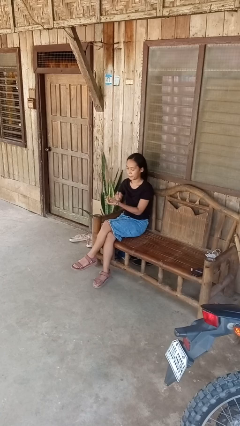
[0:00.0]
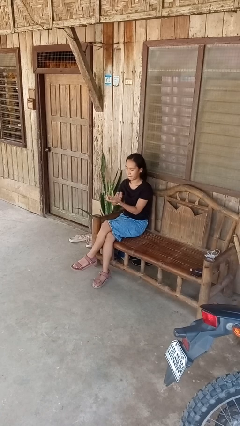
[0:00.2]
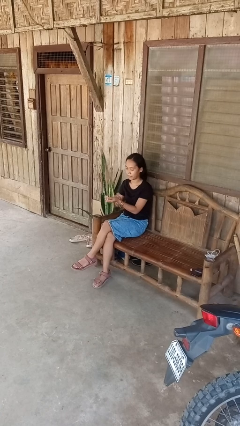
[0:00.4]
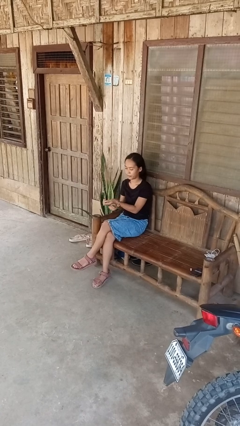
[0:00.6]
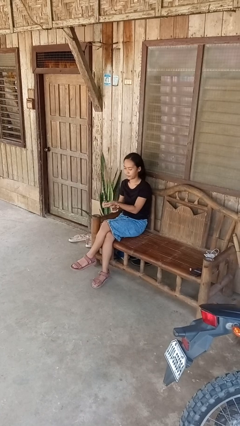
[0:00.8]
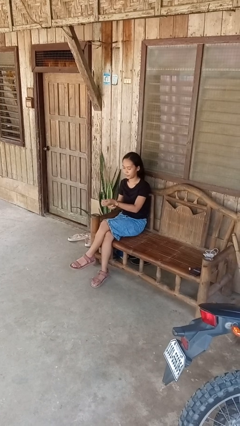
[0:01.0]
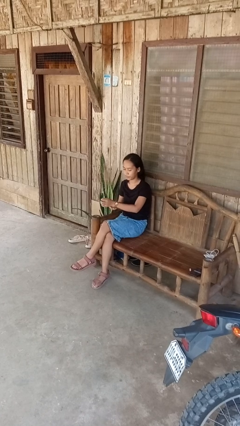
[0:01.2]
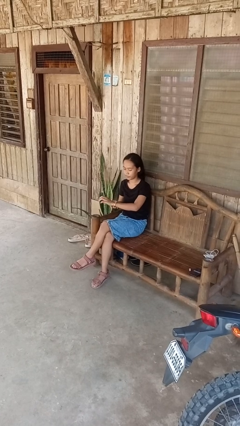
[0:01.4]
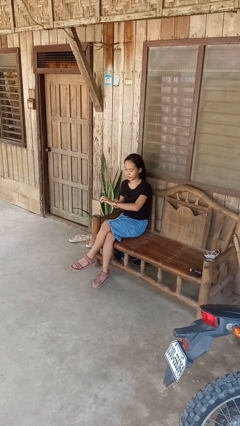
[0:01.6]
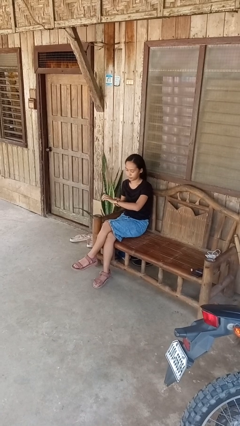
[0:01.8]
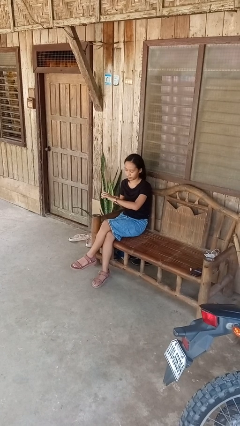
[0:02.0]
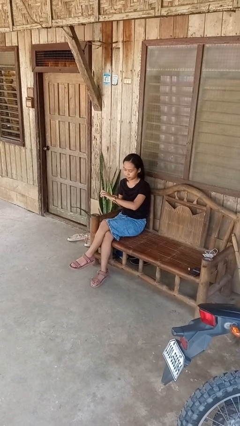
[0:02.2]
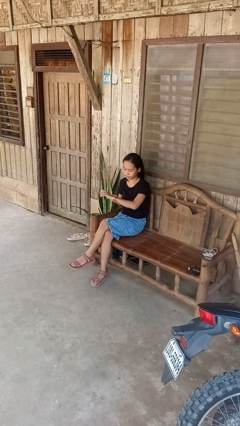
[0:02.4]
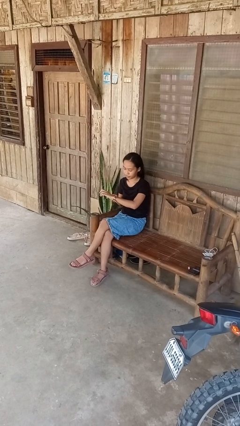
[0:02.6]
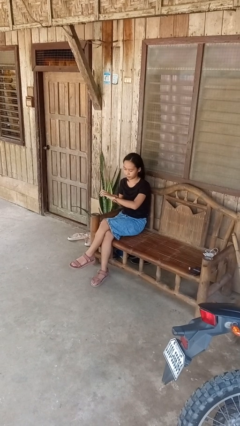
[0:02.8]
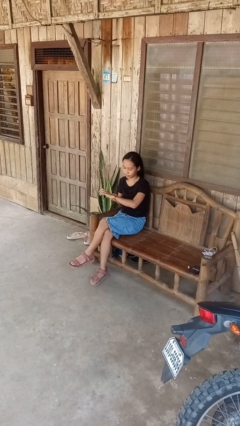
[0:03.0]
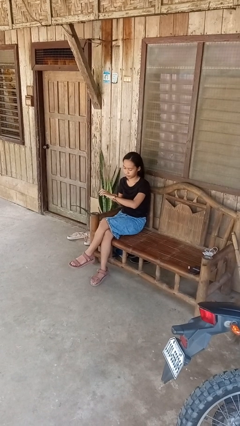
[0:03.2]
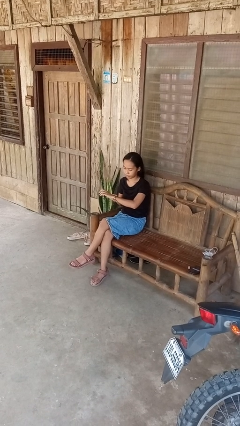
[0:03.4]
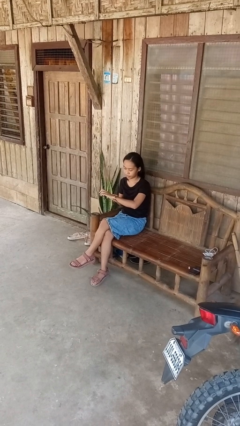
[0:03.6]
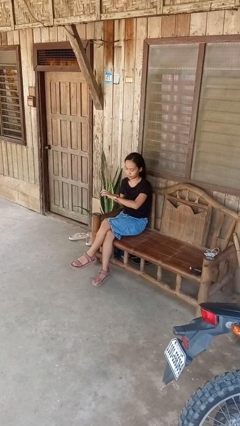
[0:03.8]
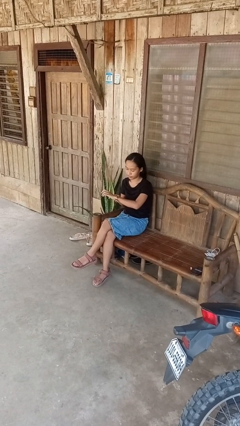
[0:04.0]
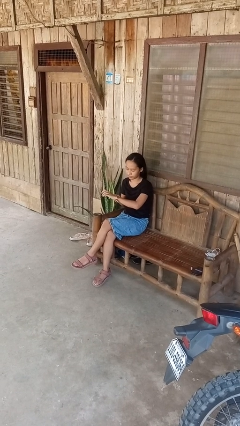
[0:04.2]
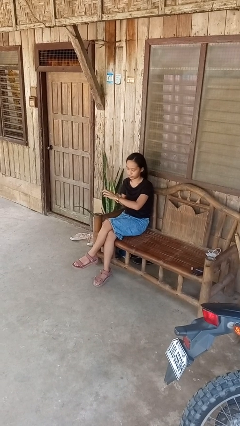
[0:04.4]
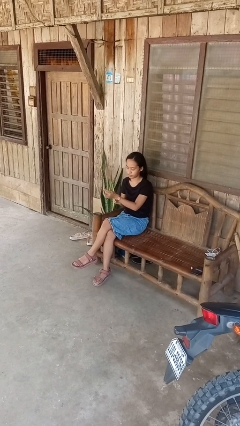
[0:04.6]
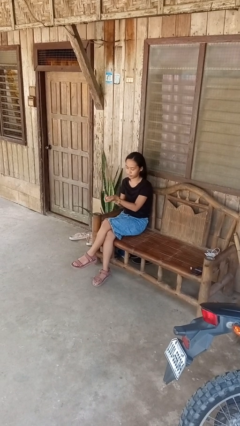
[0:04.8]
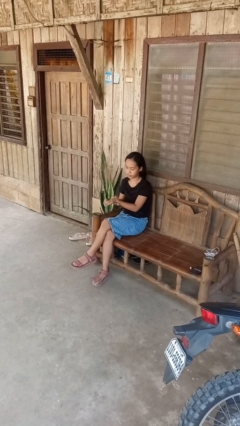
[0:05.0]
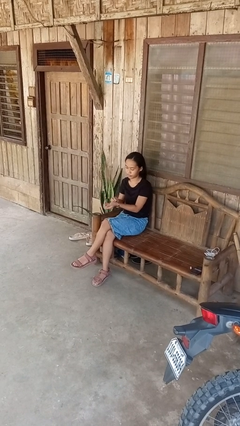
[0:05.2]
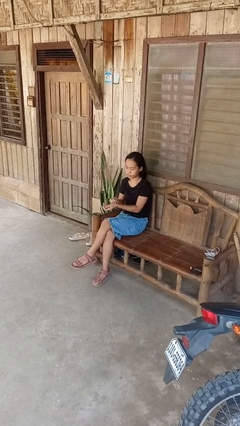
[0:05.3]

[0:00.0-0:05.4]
person puts on wristwatch

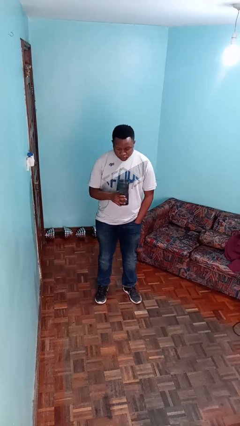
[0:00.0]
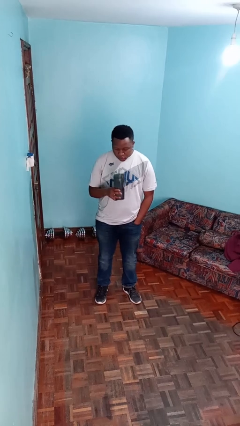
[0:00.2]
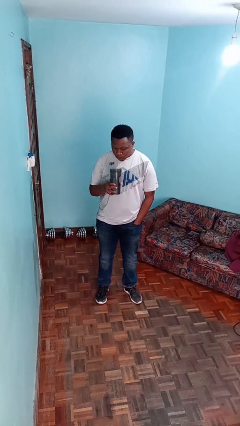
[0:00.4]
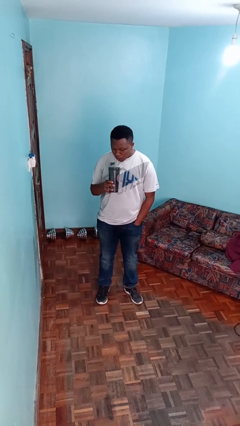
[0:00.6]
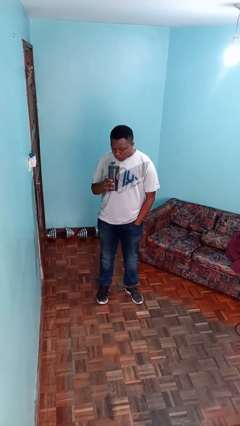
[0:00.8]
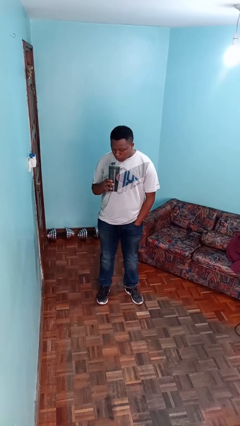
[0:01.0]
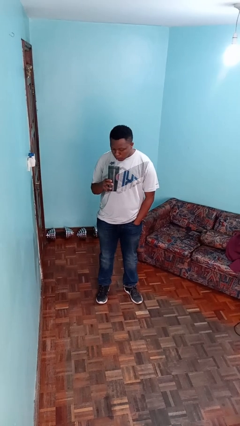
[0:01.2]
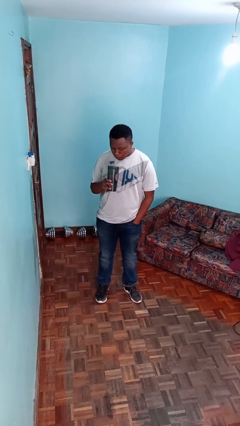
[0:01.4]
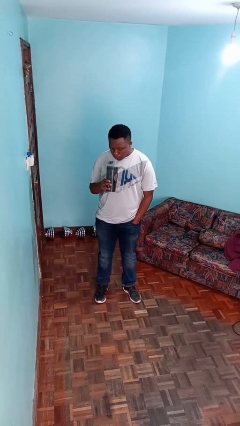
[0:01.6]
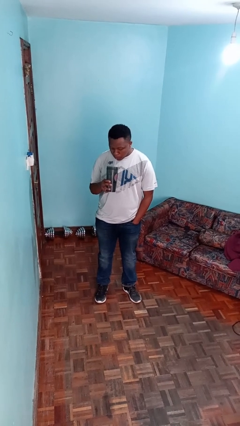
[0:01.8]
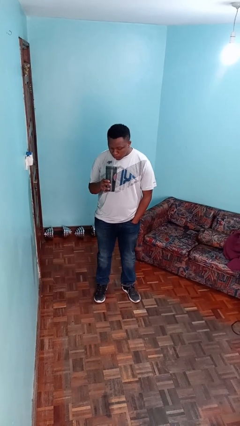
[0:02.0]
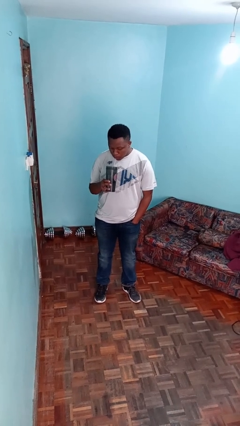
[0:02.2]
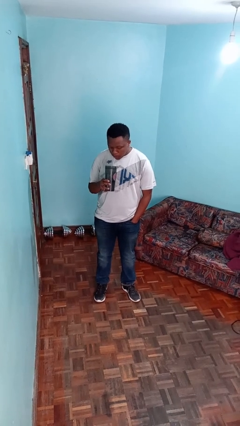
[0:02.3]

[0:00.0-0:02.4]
person drinks from straw

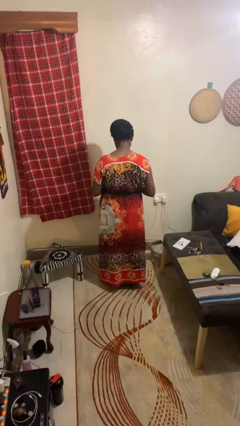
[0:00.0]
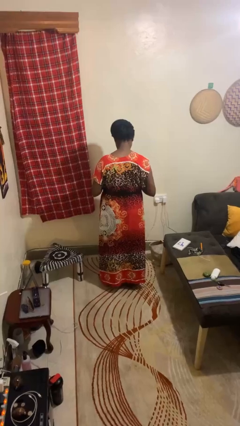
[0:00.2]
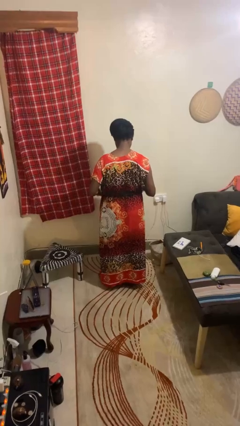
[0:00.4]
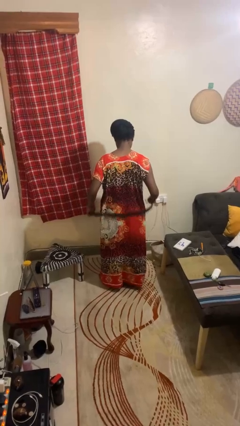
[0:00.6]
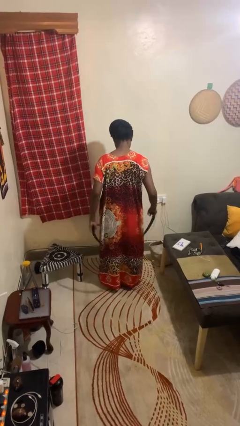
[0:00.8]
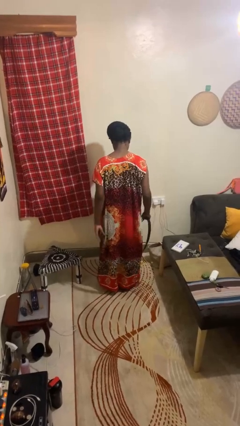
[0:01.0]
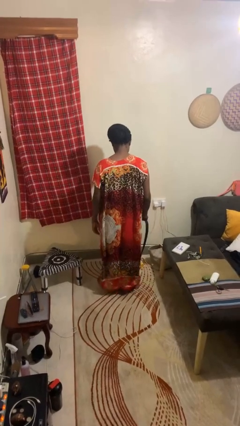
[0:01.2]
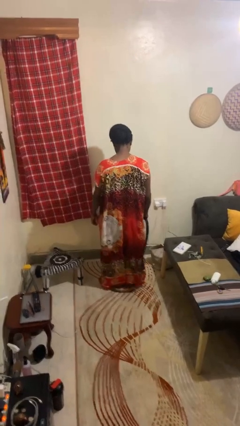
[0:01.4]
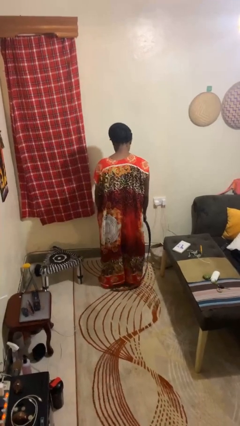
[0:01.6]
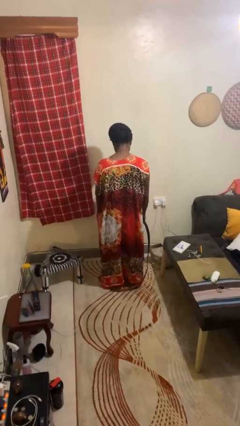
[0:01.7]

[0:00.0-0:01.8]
person takes off belt

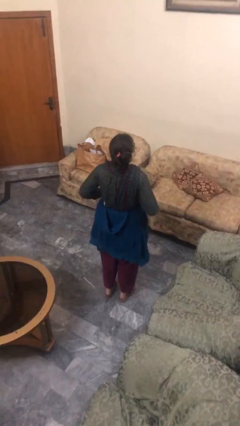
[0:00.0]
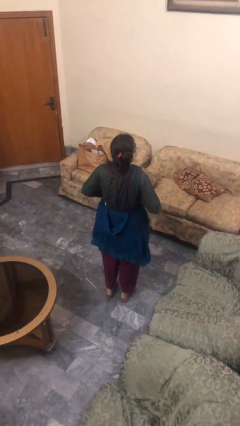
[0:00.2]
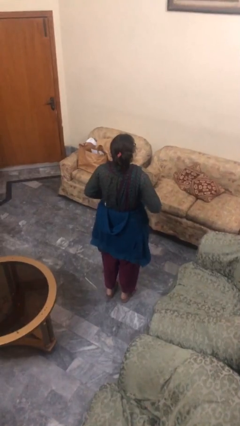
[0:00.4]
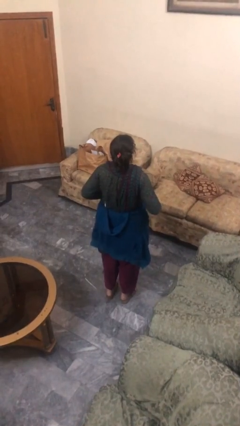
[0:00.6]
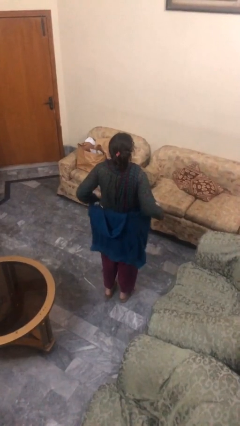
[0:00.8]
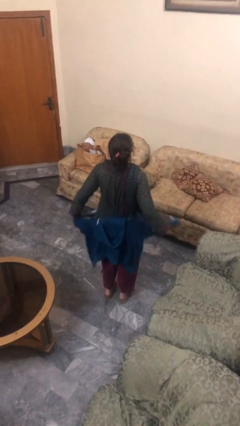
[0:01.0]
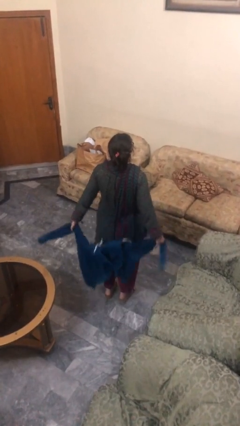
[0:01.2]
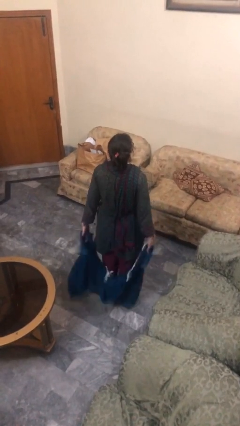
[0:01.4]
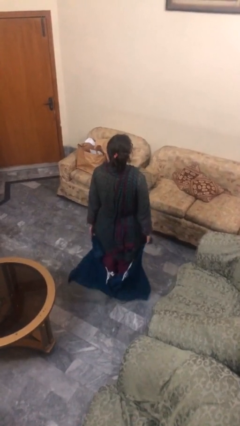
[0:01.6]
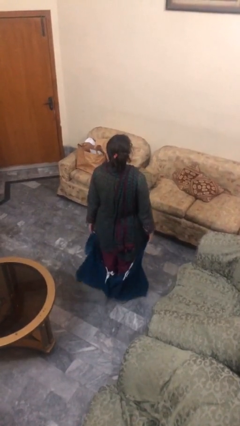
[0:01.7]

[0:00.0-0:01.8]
person unties jacket around waist

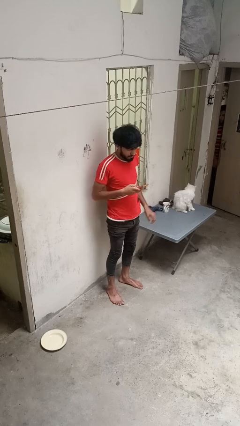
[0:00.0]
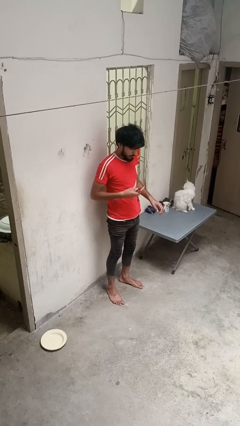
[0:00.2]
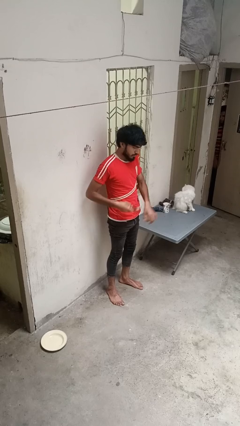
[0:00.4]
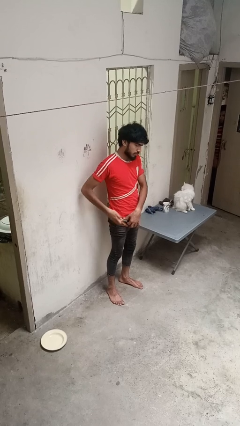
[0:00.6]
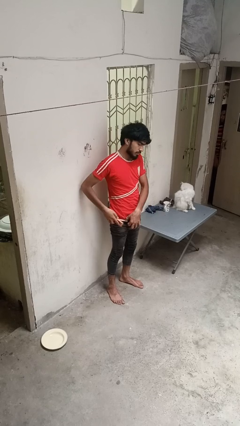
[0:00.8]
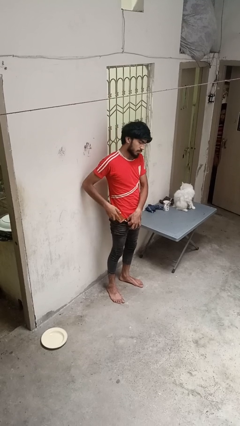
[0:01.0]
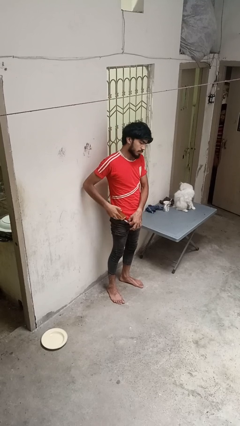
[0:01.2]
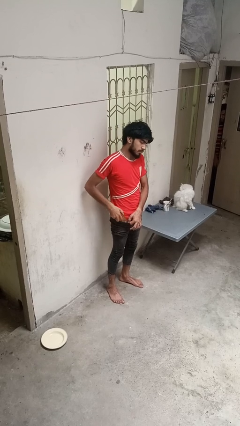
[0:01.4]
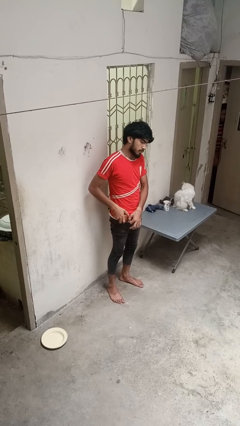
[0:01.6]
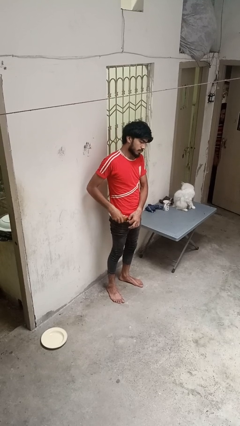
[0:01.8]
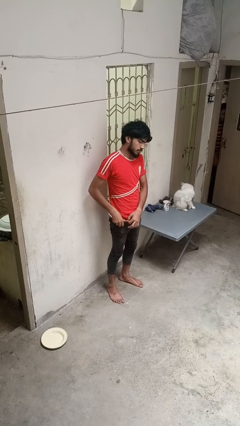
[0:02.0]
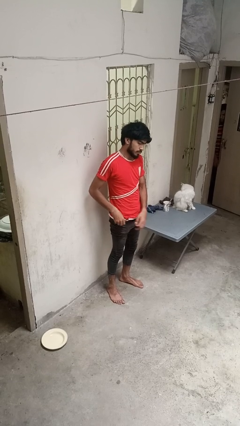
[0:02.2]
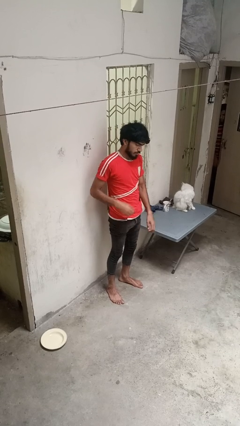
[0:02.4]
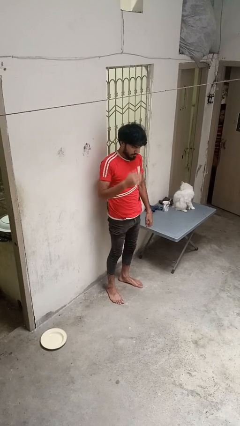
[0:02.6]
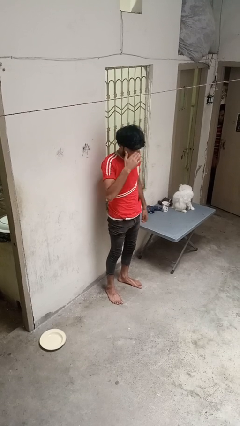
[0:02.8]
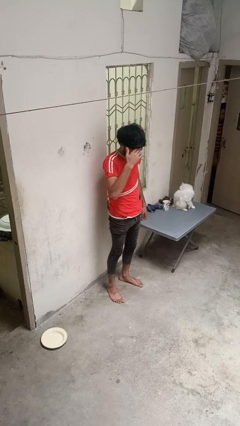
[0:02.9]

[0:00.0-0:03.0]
person puts phone into pocket

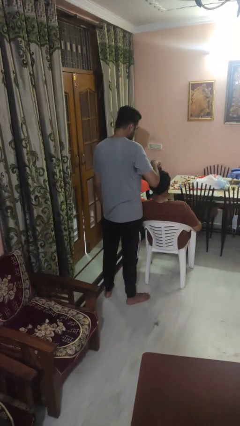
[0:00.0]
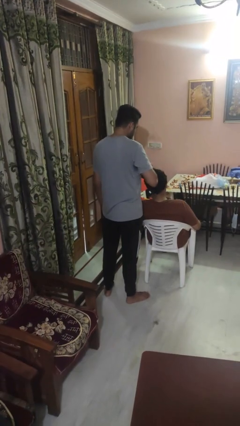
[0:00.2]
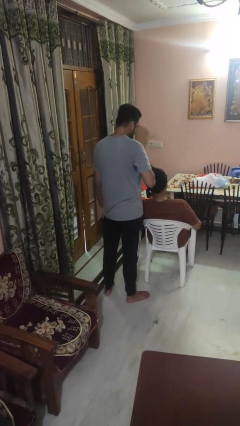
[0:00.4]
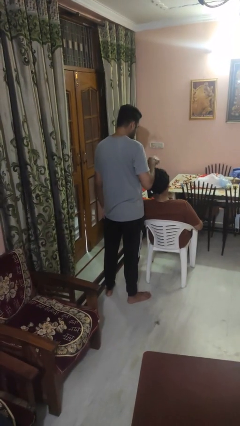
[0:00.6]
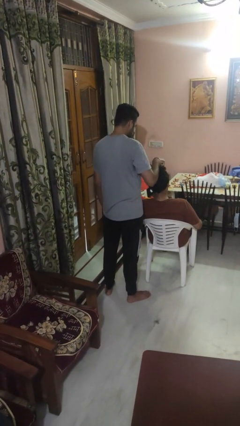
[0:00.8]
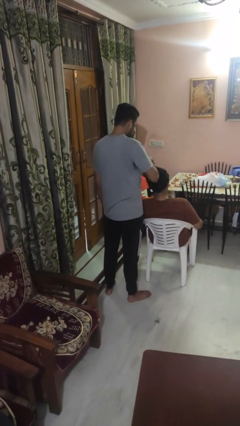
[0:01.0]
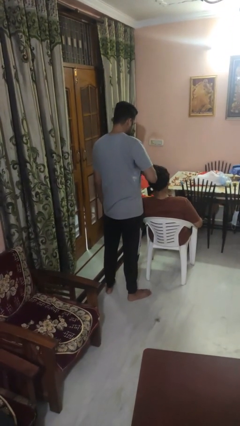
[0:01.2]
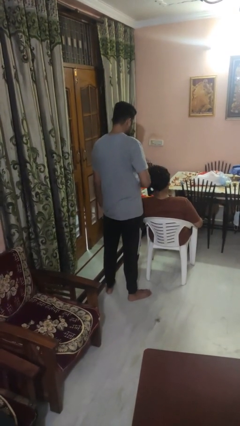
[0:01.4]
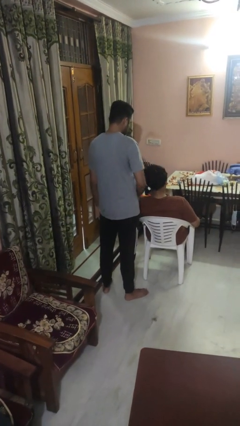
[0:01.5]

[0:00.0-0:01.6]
person brushes hair of person

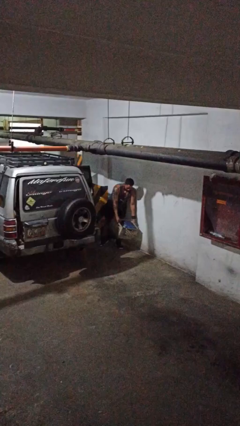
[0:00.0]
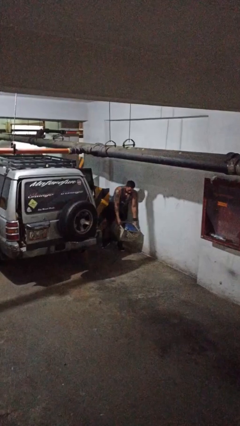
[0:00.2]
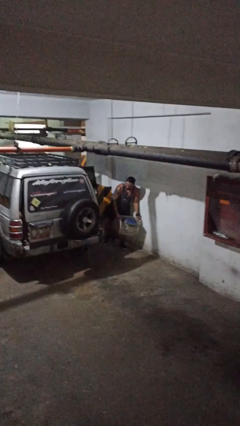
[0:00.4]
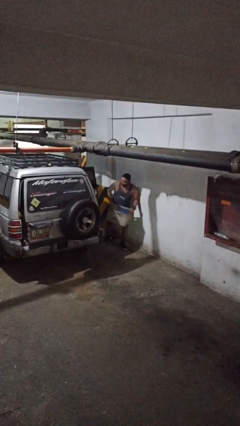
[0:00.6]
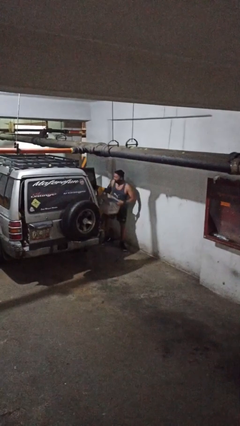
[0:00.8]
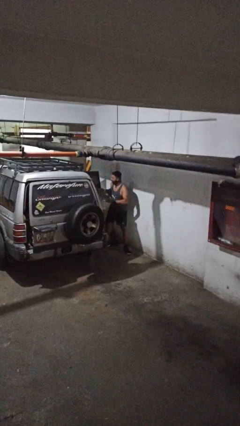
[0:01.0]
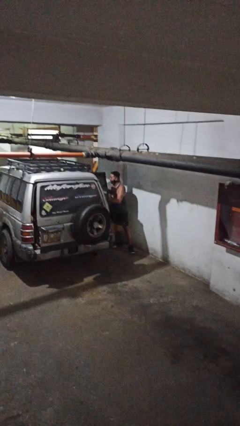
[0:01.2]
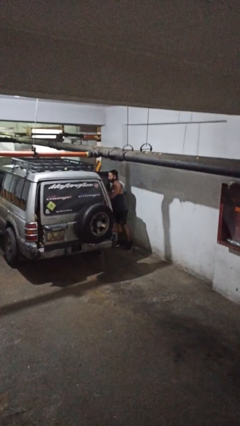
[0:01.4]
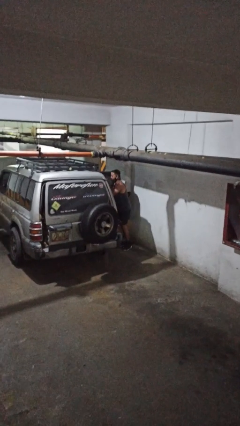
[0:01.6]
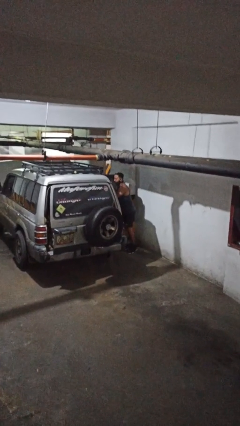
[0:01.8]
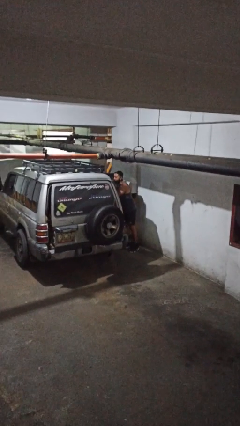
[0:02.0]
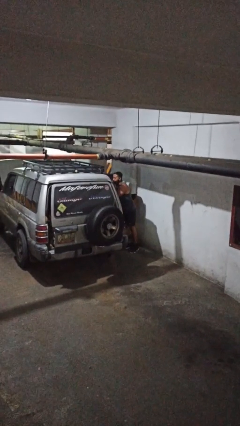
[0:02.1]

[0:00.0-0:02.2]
person loads car
